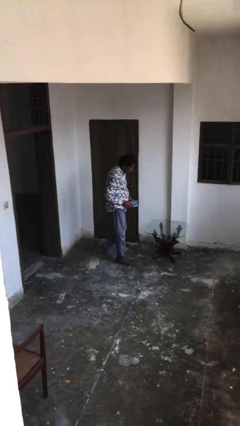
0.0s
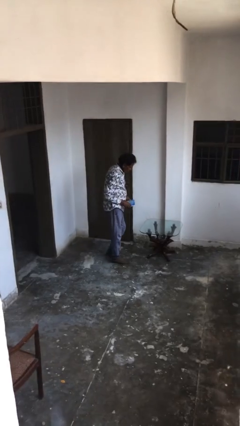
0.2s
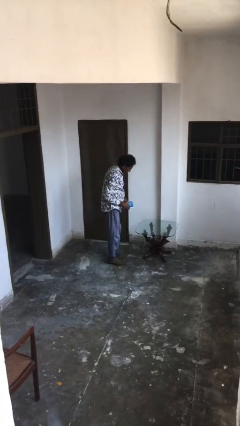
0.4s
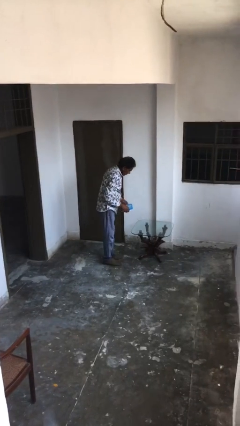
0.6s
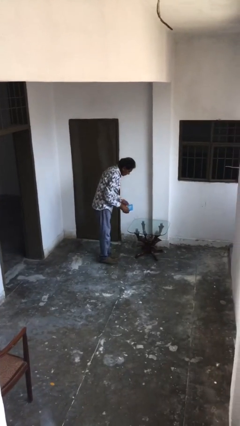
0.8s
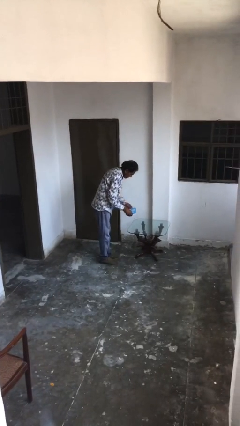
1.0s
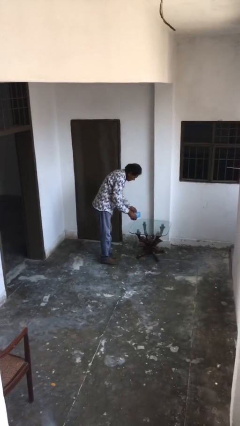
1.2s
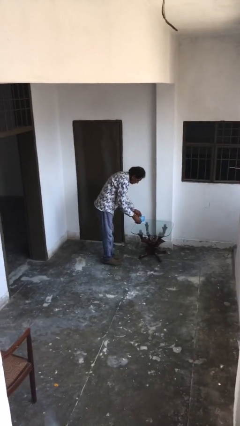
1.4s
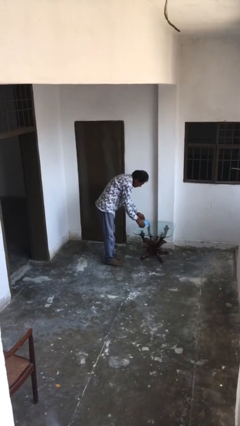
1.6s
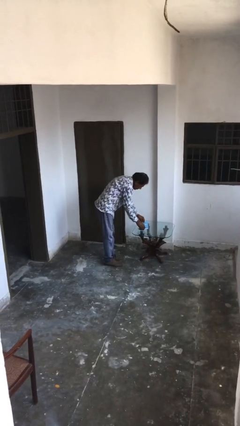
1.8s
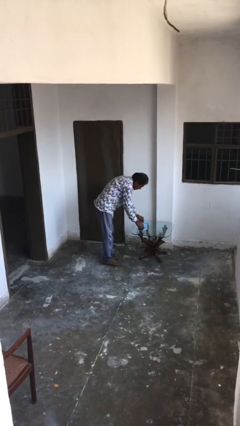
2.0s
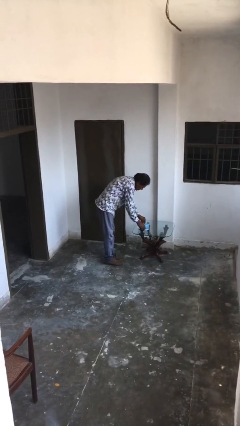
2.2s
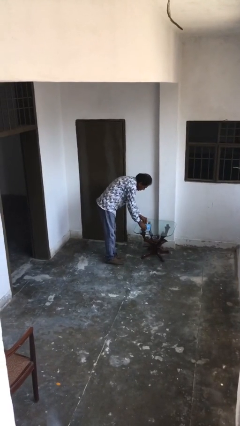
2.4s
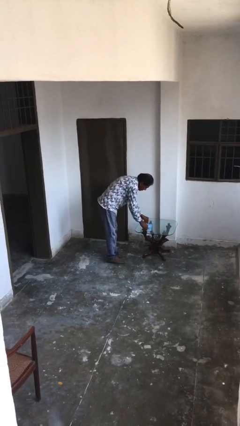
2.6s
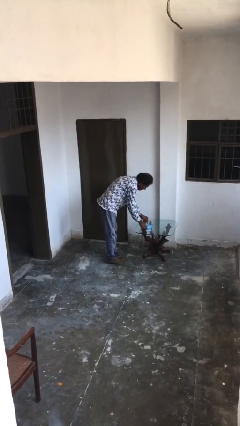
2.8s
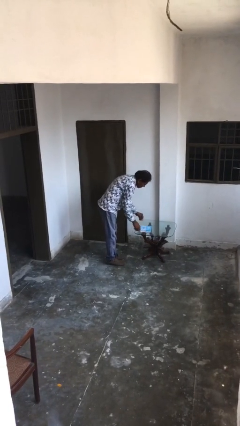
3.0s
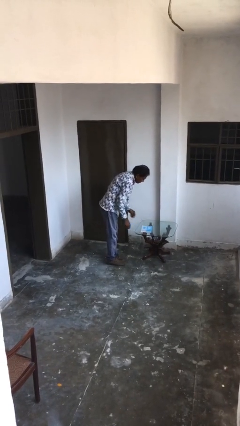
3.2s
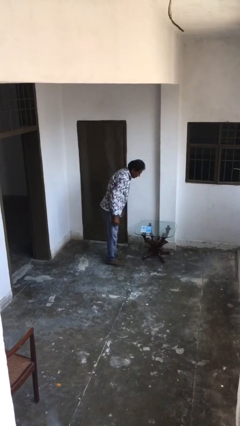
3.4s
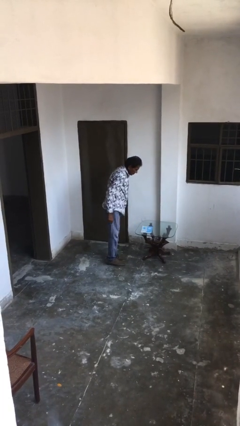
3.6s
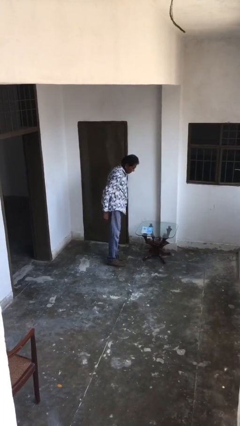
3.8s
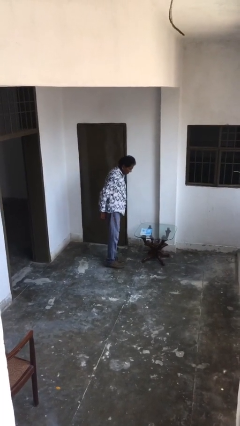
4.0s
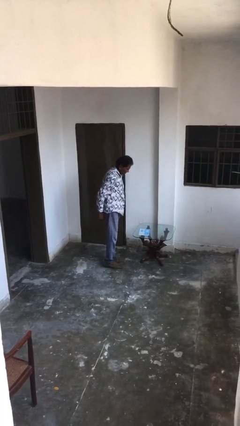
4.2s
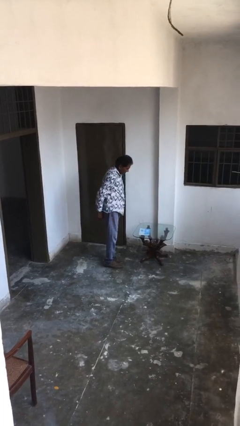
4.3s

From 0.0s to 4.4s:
person puts down object on table

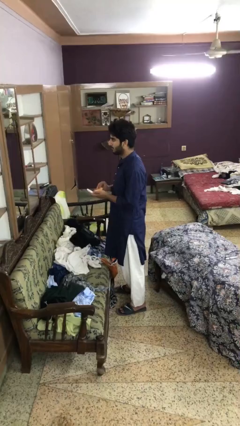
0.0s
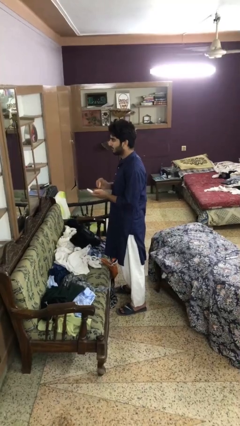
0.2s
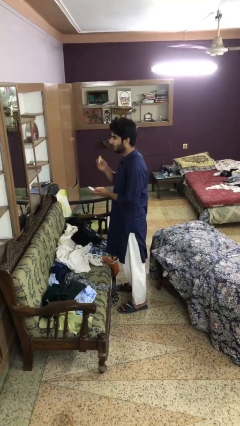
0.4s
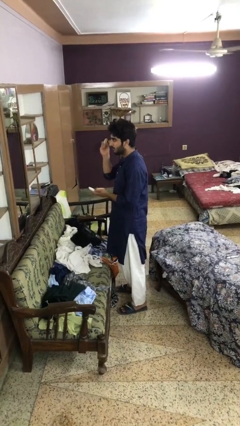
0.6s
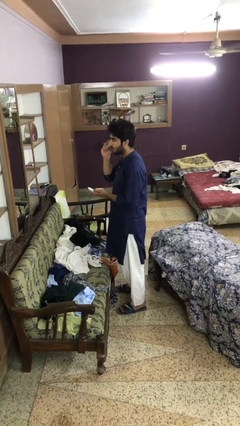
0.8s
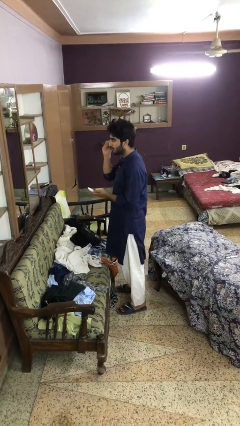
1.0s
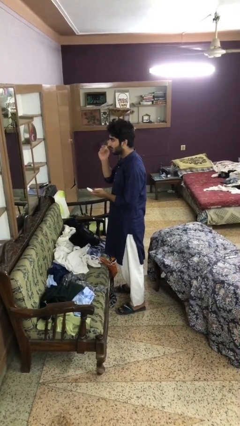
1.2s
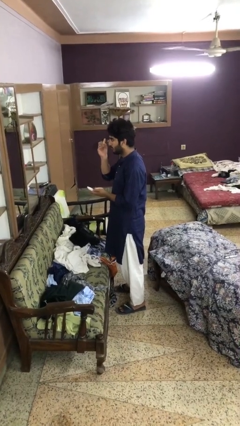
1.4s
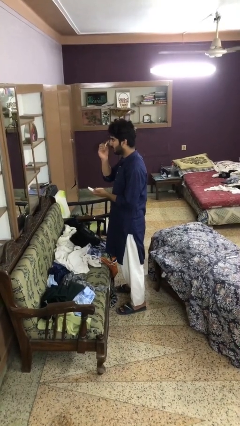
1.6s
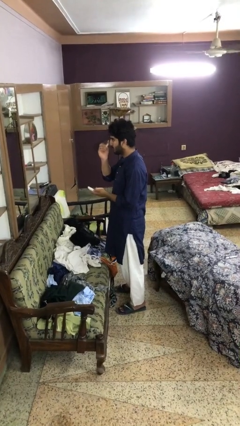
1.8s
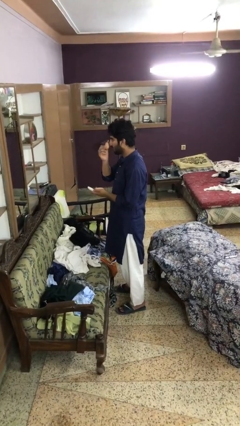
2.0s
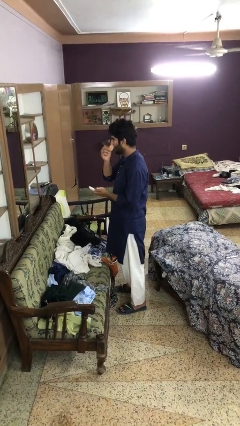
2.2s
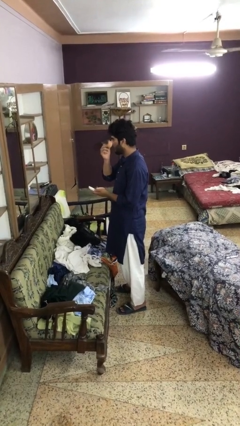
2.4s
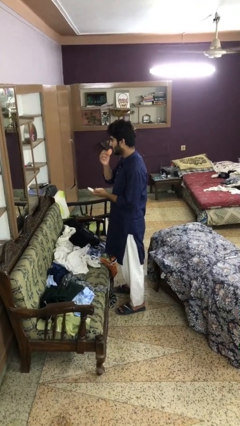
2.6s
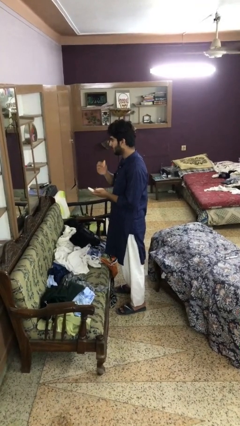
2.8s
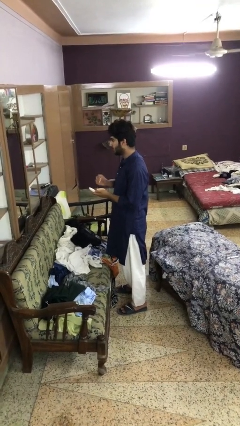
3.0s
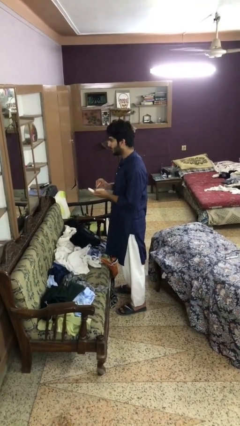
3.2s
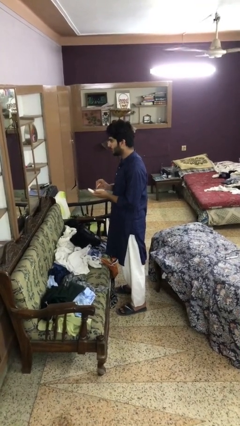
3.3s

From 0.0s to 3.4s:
person applies foundation makeup

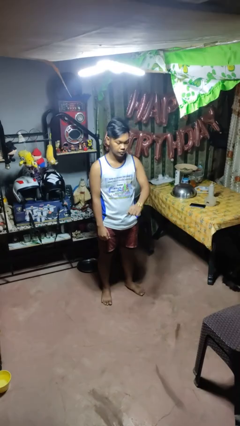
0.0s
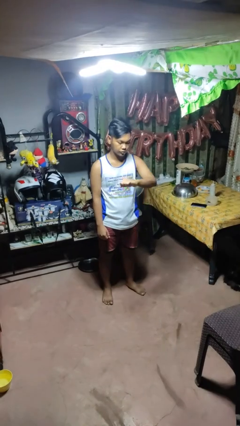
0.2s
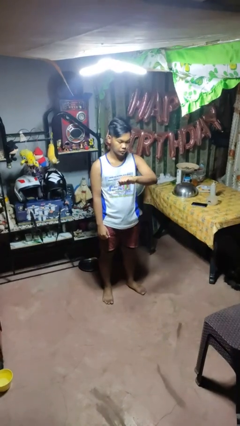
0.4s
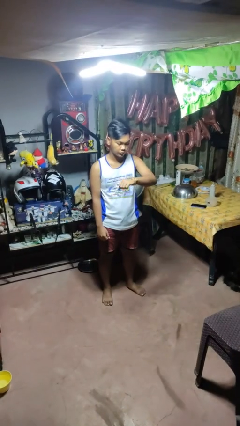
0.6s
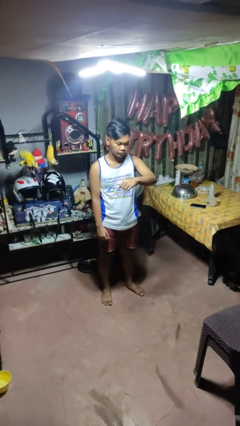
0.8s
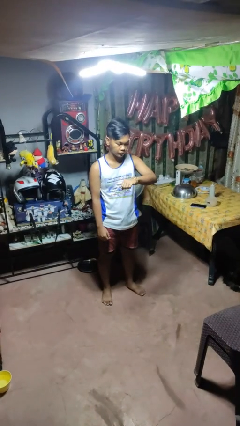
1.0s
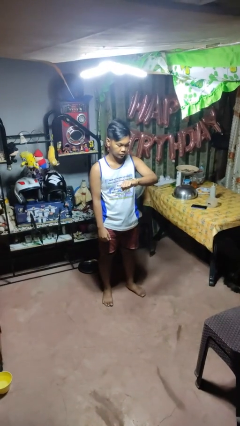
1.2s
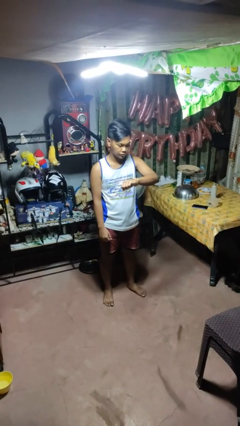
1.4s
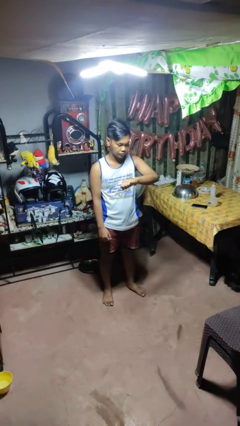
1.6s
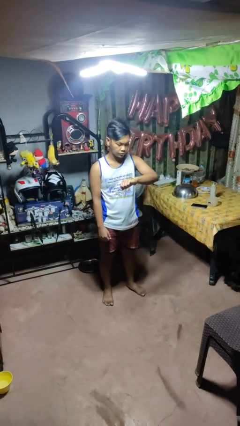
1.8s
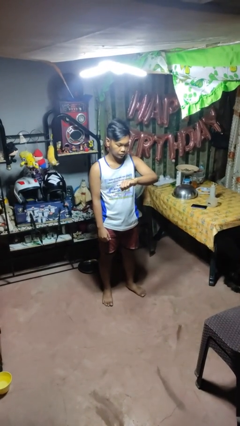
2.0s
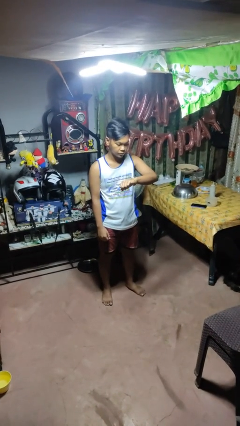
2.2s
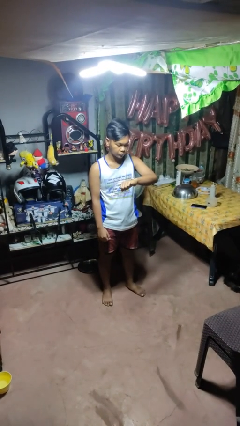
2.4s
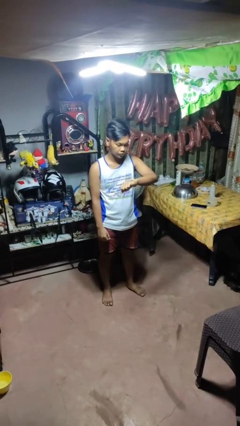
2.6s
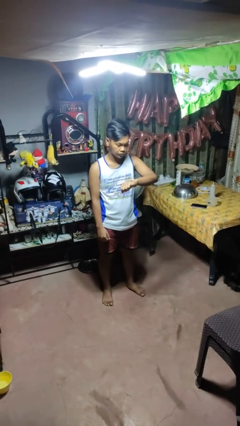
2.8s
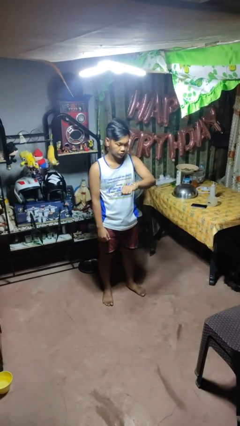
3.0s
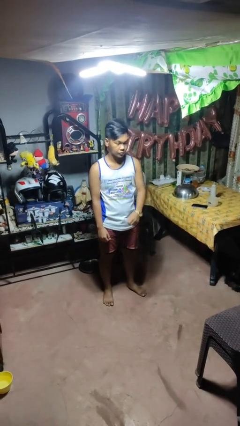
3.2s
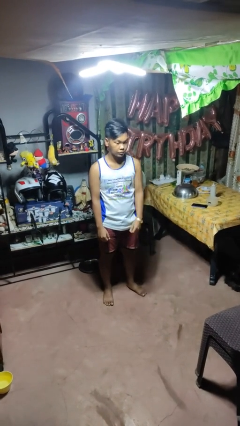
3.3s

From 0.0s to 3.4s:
person looks at wristwatch

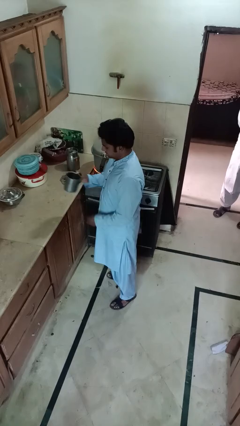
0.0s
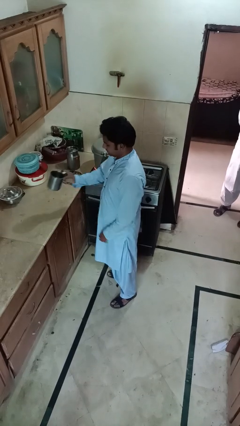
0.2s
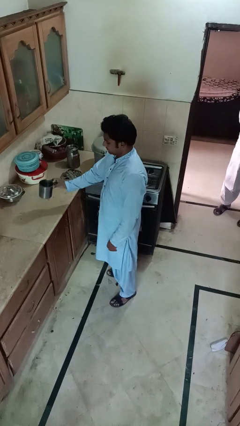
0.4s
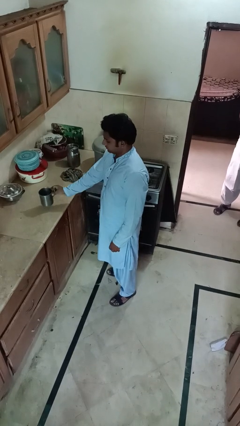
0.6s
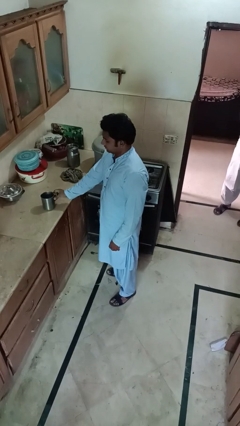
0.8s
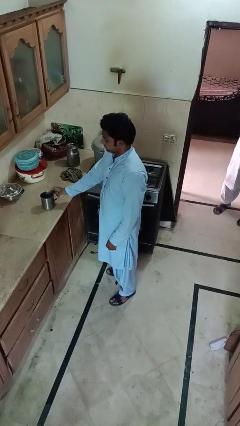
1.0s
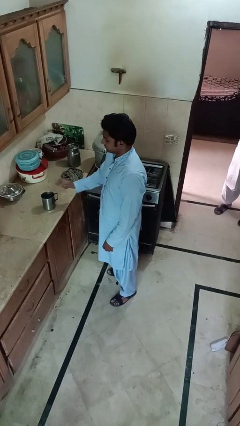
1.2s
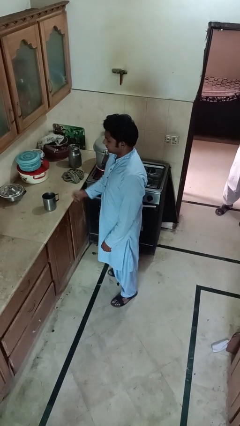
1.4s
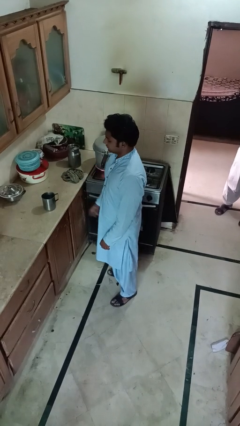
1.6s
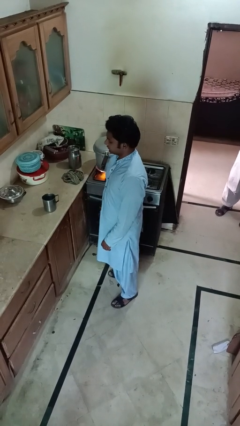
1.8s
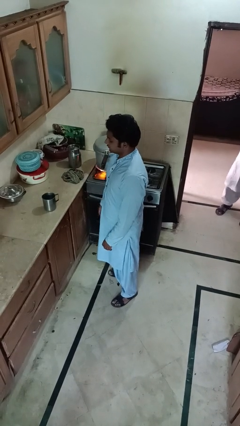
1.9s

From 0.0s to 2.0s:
person puts down object on countertop

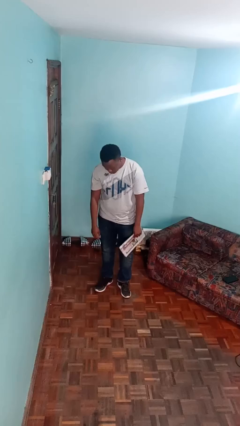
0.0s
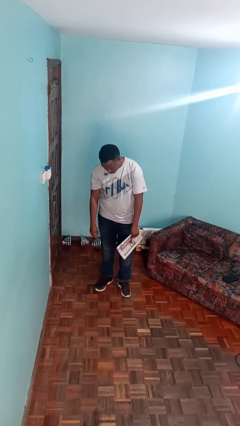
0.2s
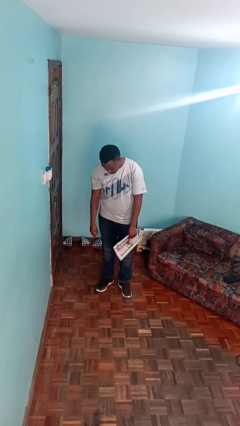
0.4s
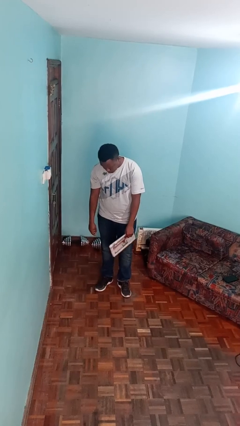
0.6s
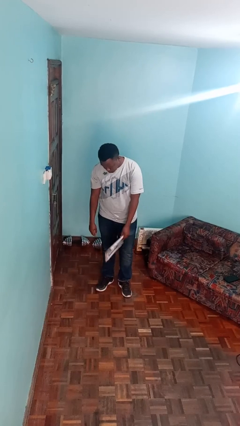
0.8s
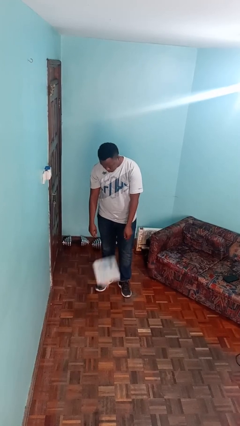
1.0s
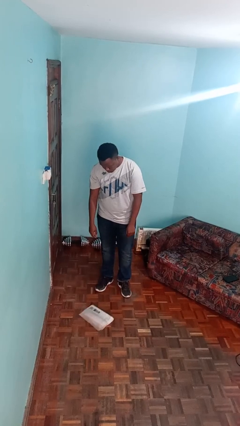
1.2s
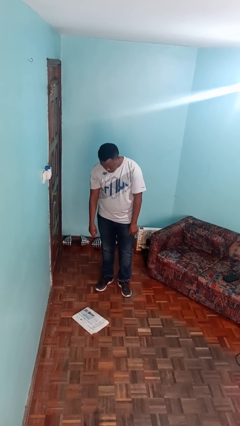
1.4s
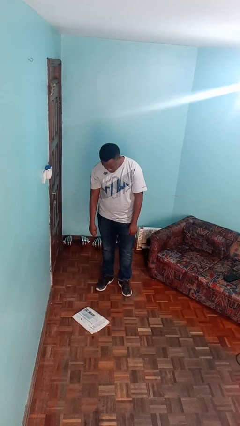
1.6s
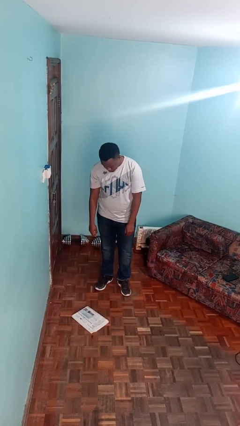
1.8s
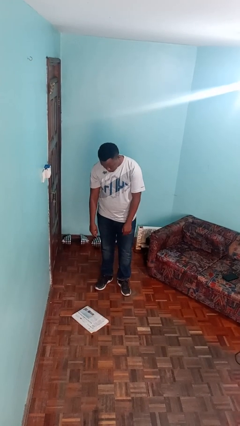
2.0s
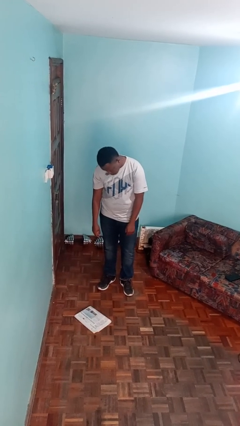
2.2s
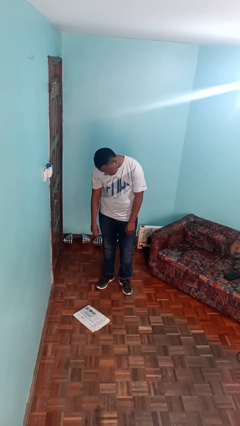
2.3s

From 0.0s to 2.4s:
person drops object

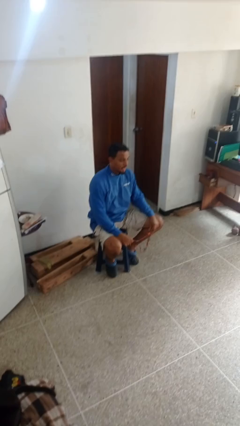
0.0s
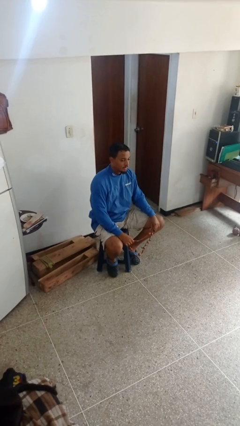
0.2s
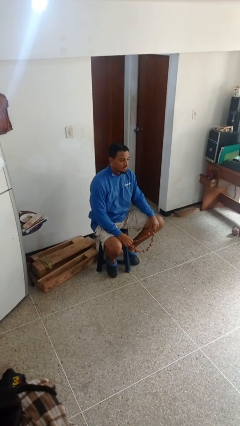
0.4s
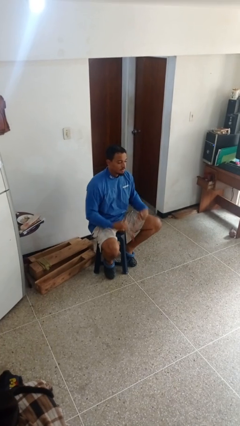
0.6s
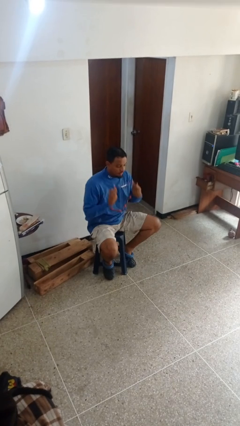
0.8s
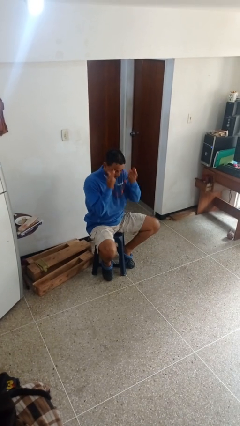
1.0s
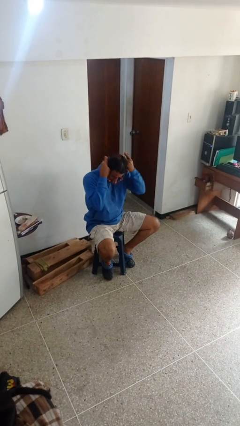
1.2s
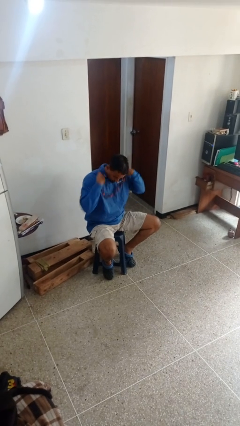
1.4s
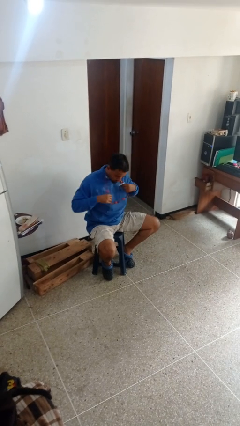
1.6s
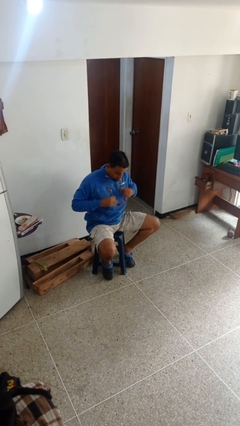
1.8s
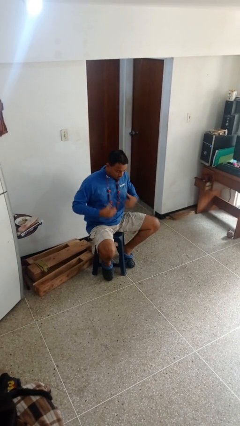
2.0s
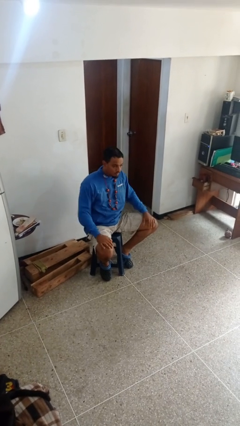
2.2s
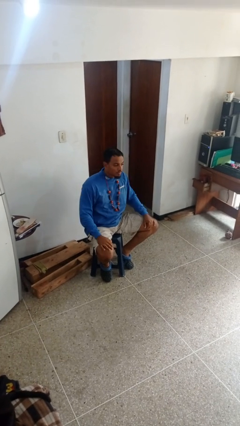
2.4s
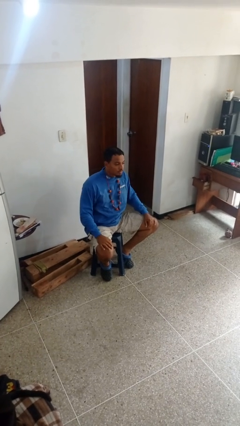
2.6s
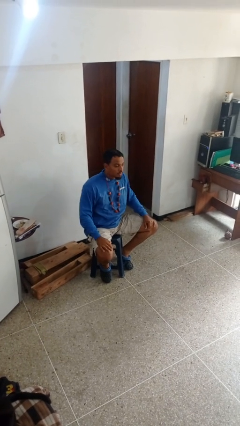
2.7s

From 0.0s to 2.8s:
person puts on necklace
